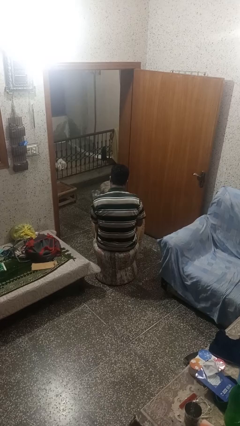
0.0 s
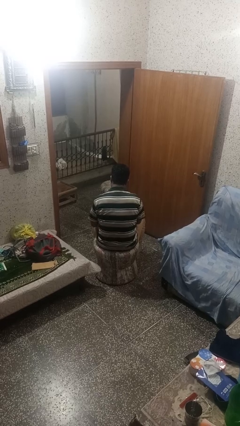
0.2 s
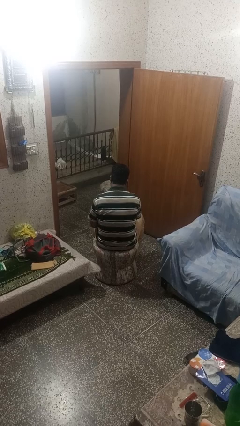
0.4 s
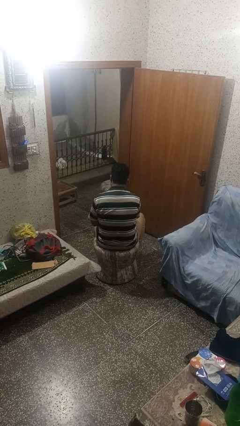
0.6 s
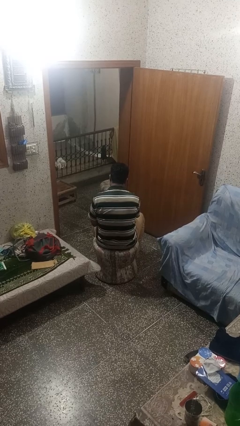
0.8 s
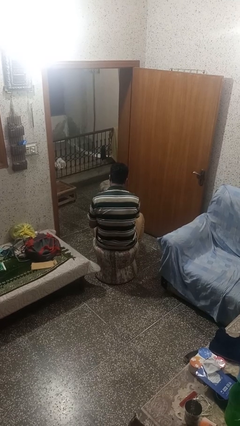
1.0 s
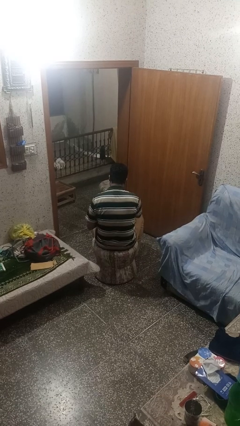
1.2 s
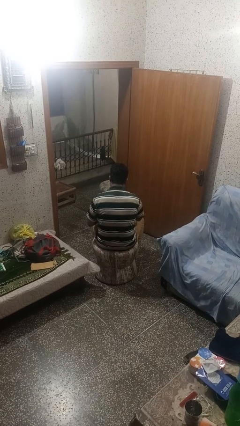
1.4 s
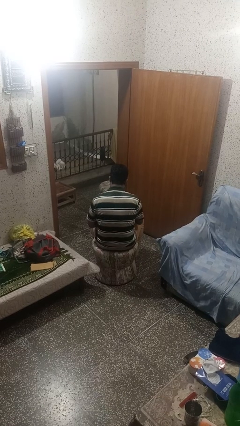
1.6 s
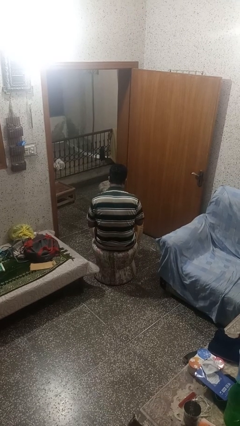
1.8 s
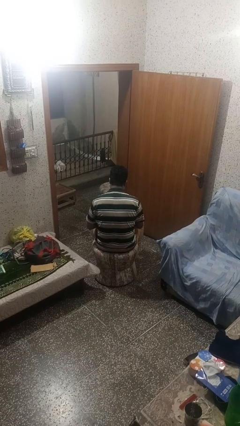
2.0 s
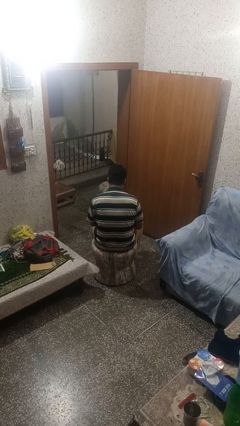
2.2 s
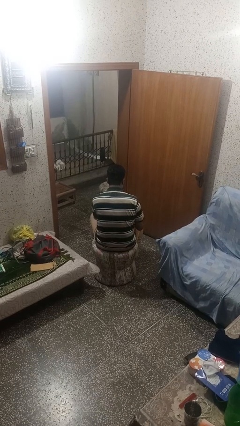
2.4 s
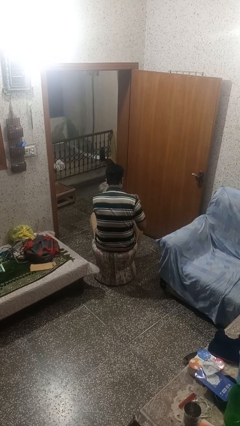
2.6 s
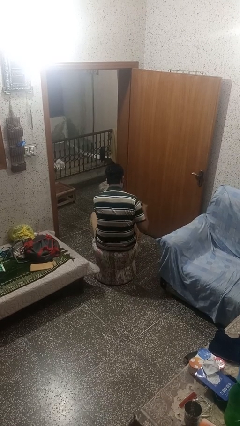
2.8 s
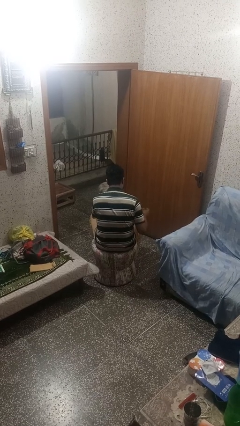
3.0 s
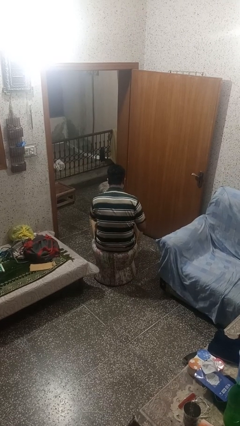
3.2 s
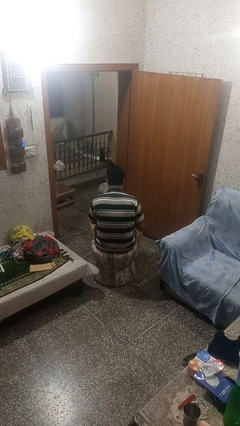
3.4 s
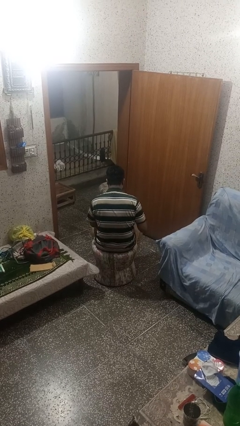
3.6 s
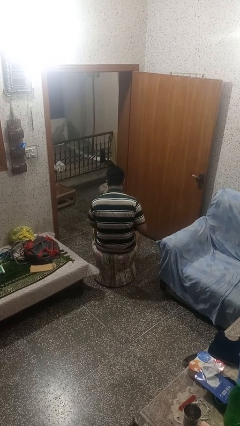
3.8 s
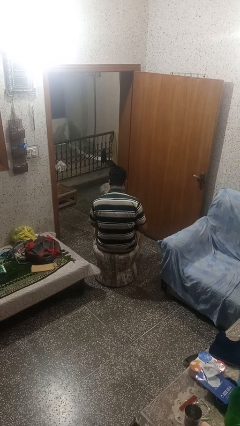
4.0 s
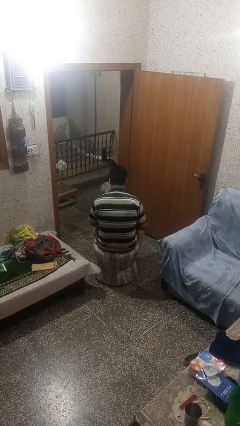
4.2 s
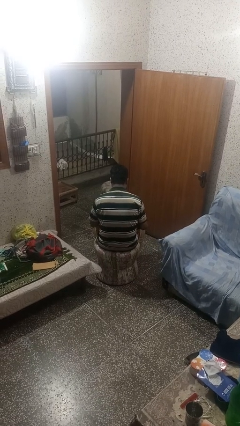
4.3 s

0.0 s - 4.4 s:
person takes off gloves

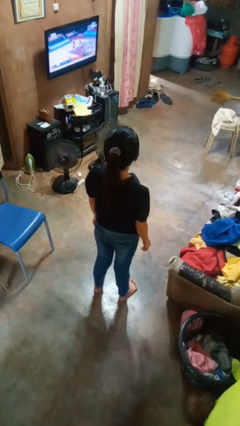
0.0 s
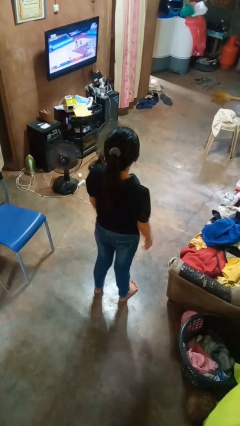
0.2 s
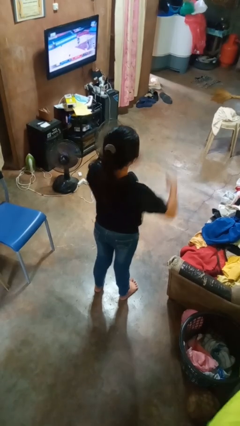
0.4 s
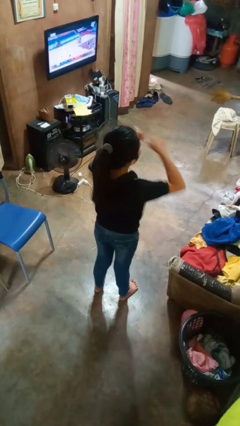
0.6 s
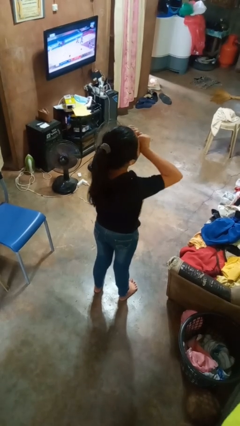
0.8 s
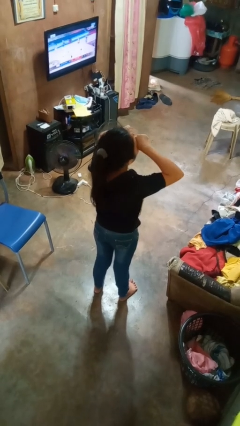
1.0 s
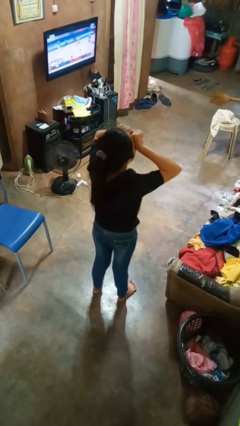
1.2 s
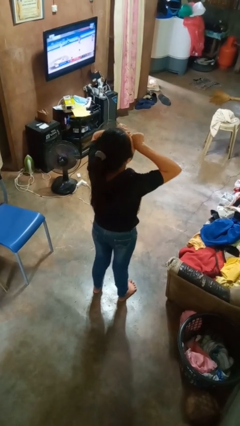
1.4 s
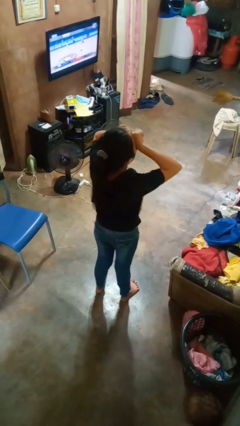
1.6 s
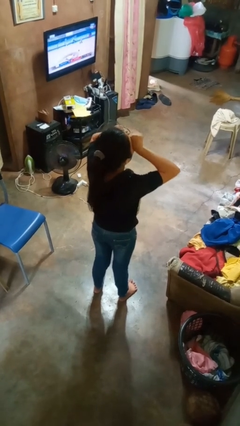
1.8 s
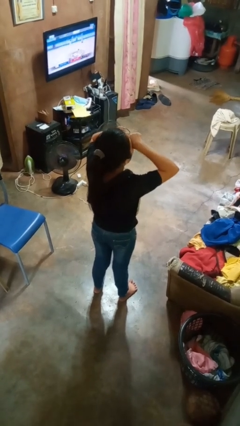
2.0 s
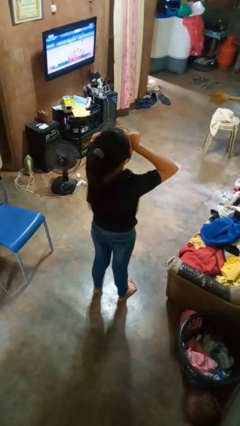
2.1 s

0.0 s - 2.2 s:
person rubs eyes

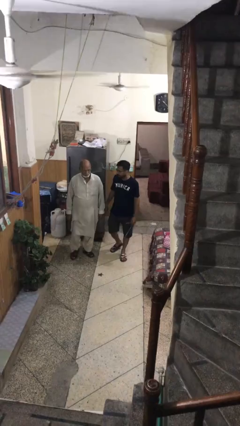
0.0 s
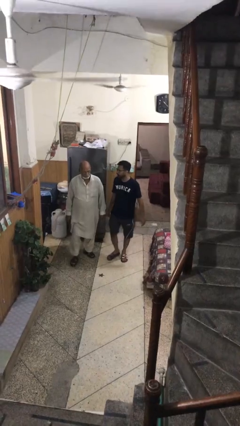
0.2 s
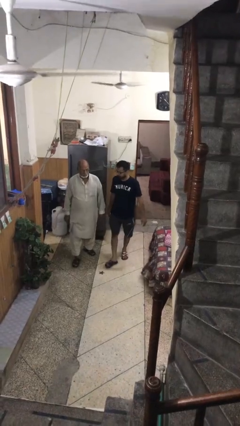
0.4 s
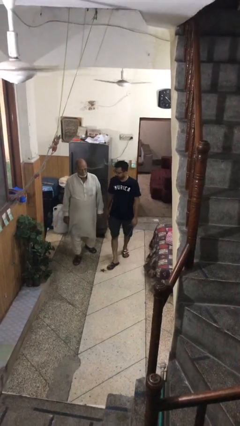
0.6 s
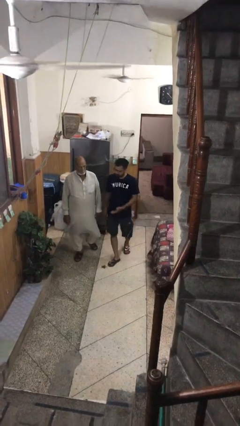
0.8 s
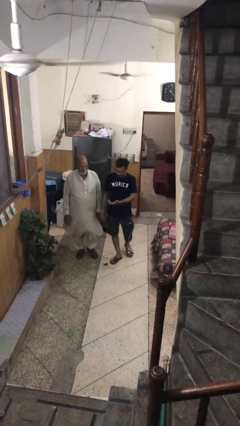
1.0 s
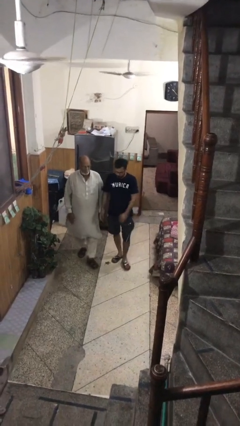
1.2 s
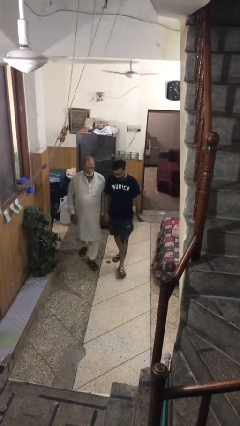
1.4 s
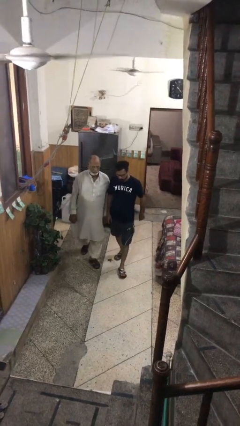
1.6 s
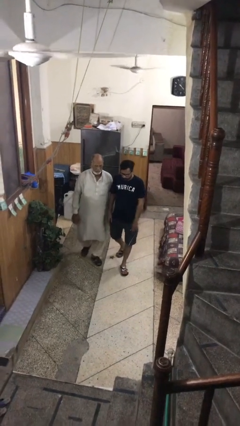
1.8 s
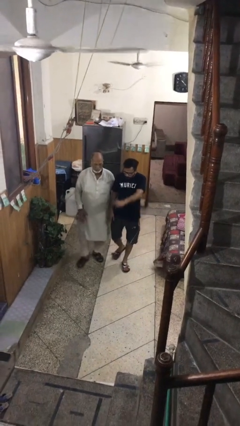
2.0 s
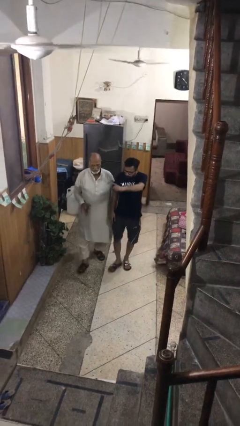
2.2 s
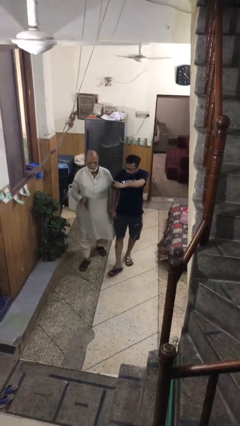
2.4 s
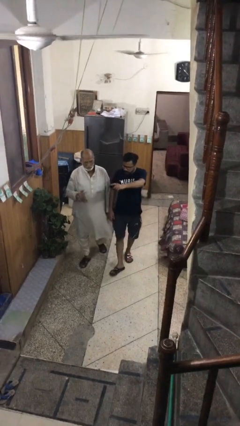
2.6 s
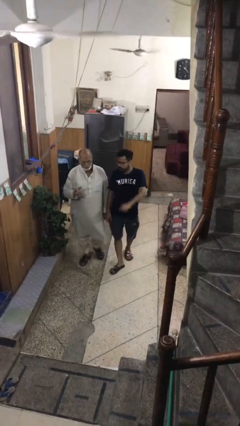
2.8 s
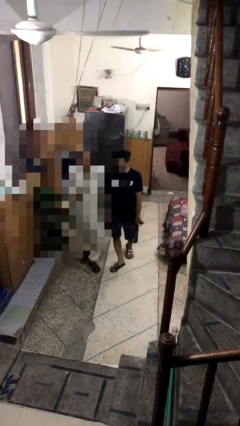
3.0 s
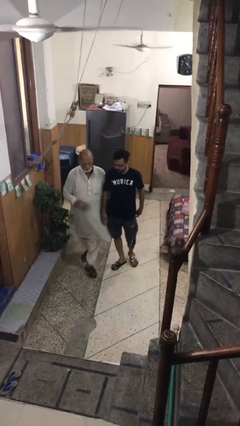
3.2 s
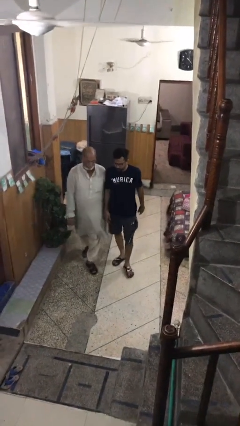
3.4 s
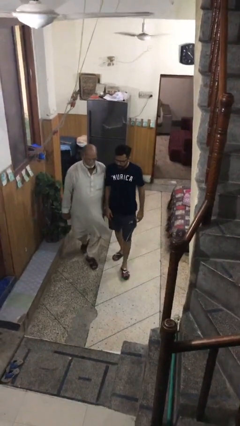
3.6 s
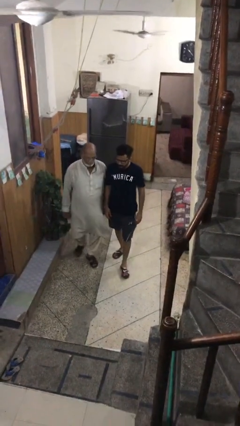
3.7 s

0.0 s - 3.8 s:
person talks to person

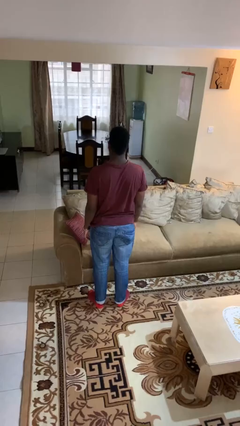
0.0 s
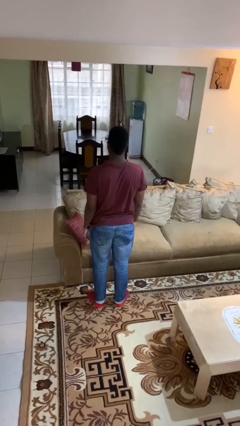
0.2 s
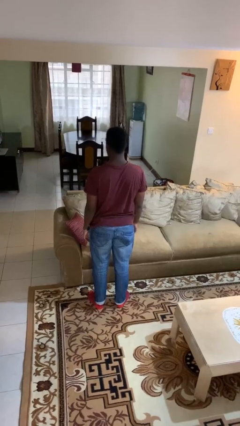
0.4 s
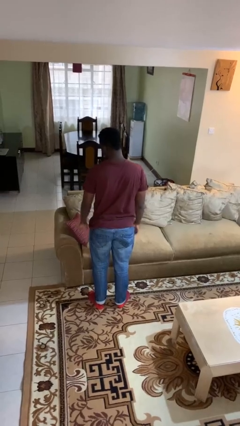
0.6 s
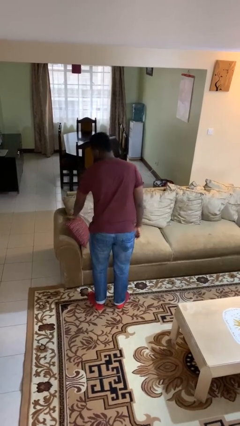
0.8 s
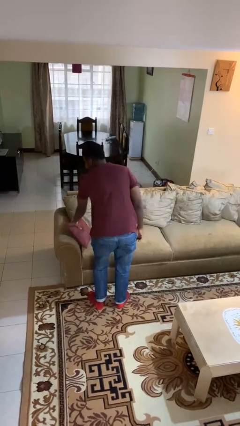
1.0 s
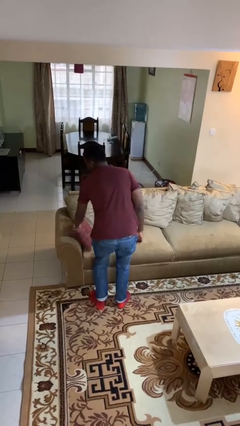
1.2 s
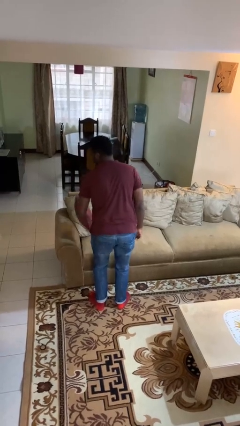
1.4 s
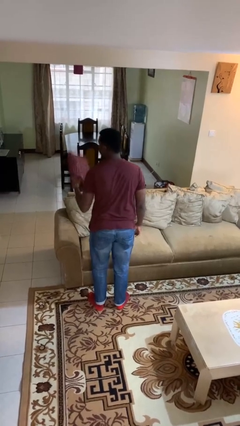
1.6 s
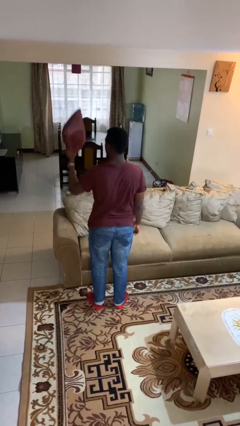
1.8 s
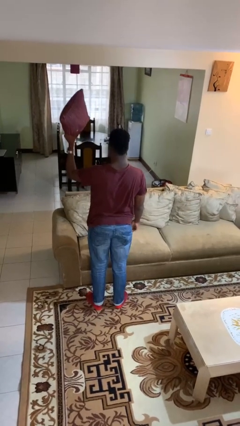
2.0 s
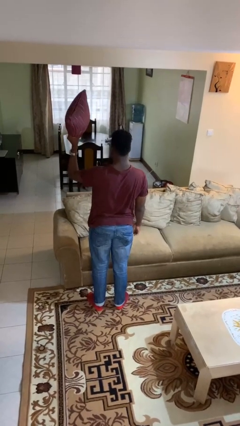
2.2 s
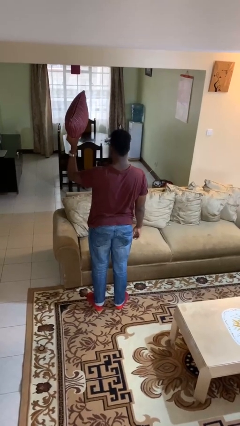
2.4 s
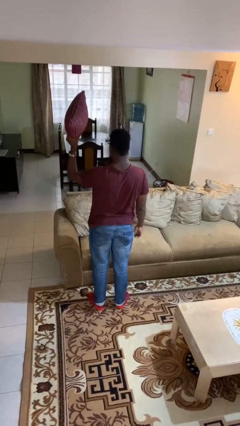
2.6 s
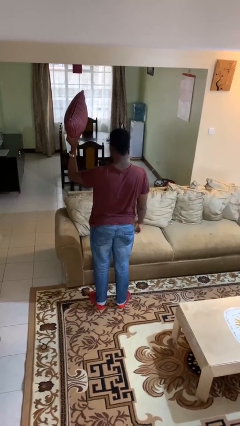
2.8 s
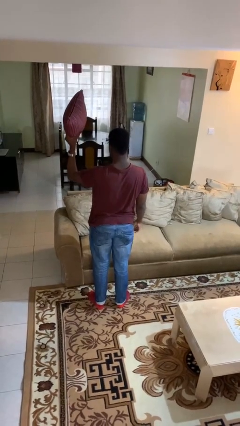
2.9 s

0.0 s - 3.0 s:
person picks up object from couch

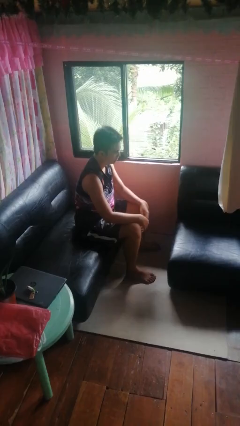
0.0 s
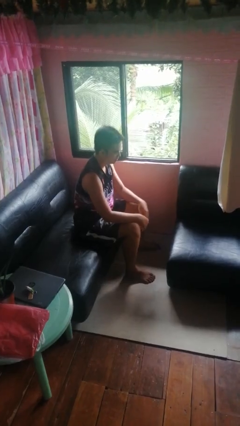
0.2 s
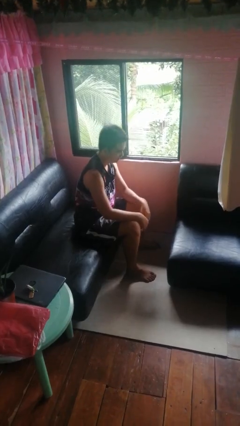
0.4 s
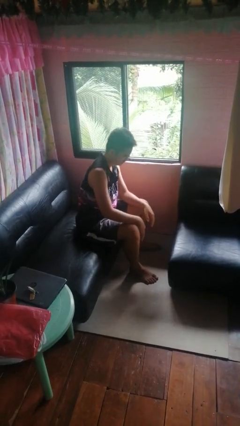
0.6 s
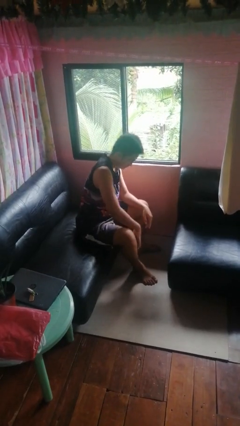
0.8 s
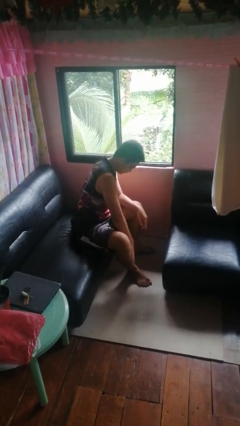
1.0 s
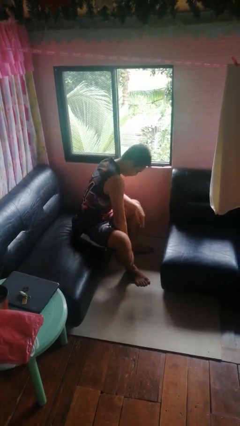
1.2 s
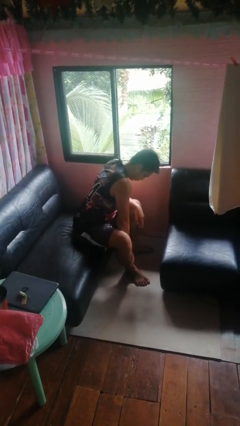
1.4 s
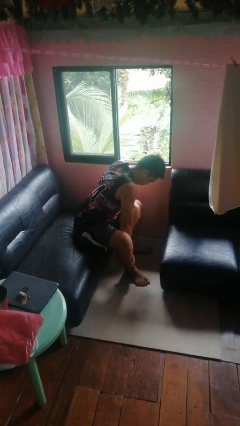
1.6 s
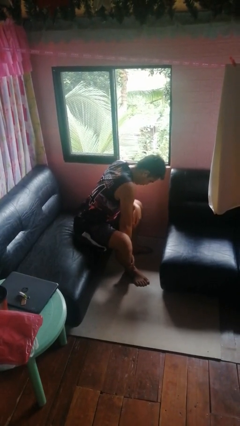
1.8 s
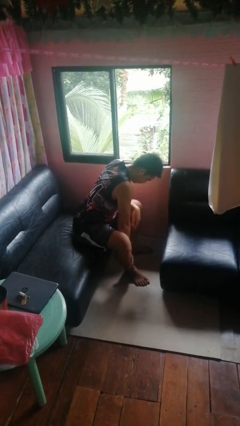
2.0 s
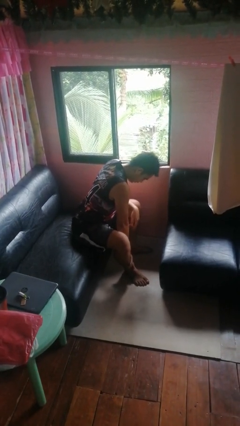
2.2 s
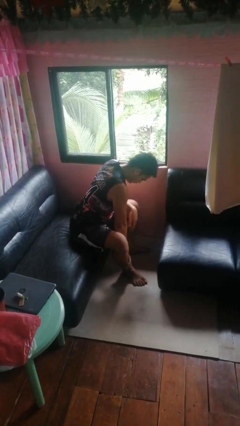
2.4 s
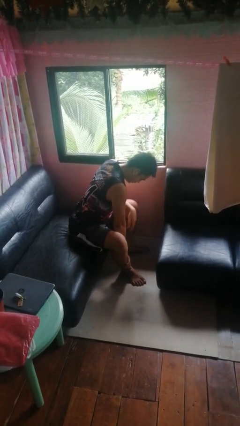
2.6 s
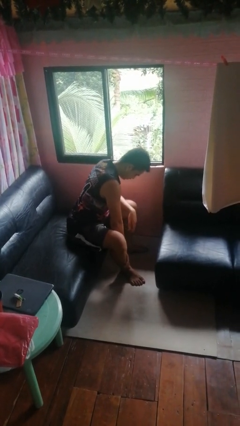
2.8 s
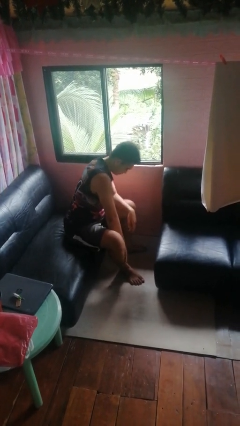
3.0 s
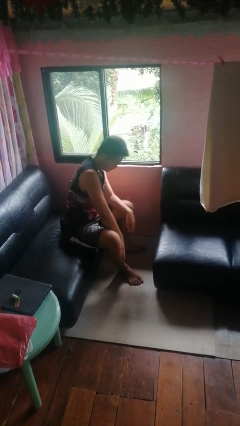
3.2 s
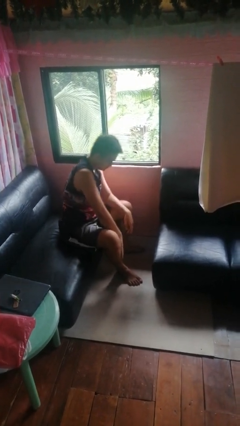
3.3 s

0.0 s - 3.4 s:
person rubs foot

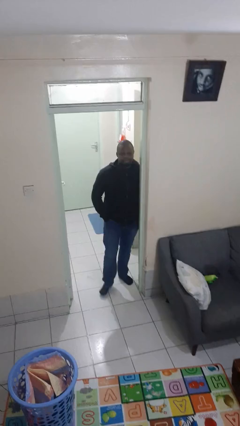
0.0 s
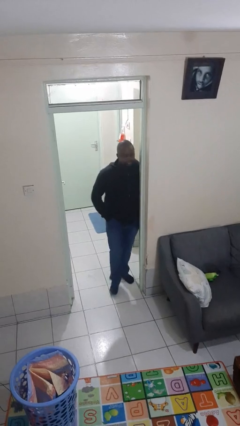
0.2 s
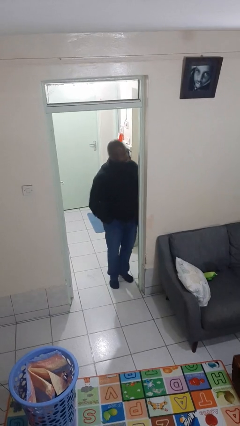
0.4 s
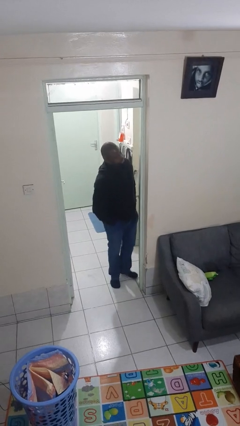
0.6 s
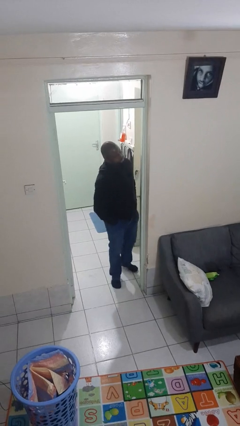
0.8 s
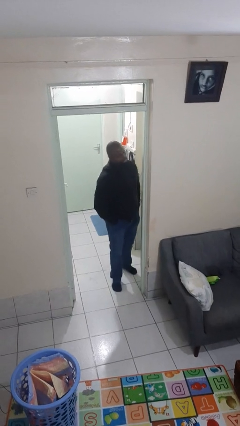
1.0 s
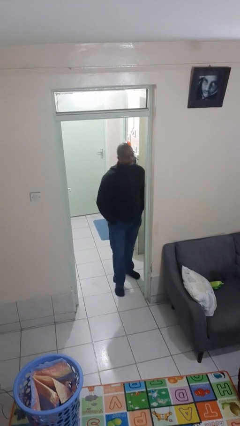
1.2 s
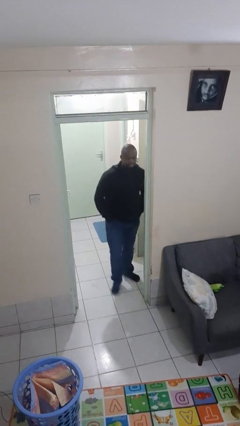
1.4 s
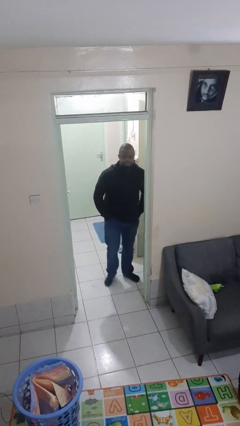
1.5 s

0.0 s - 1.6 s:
person bumps into wall
